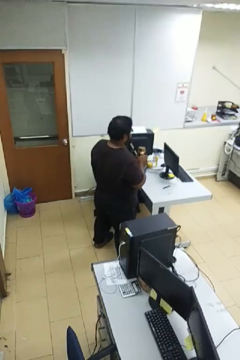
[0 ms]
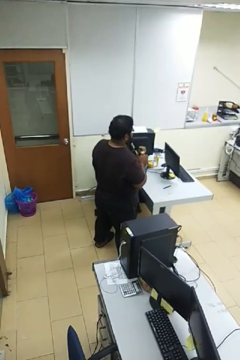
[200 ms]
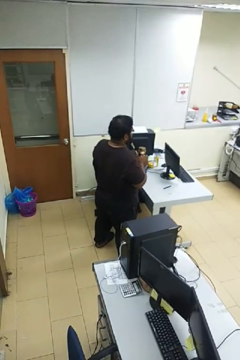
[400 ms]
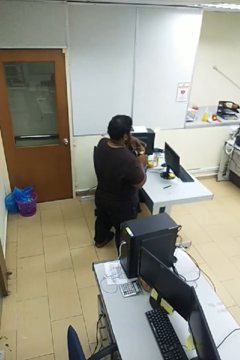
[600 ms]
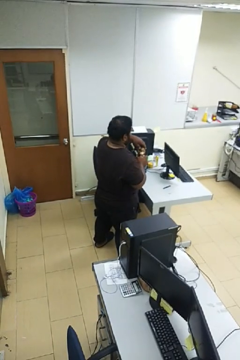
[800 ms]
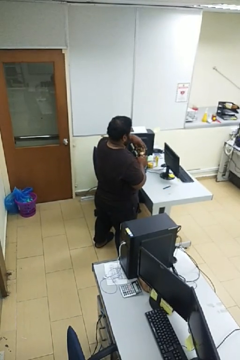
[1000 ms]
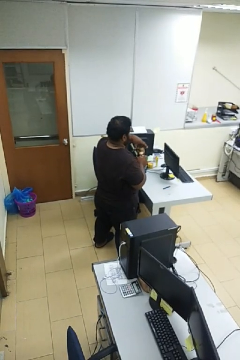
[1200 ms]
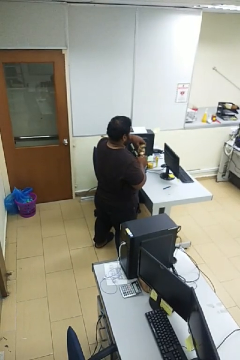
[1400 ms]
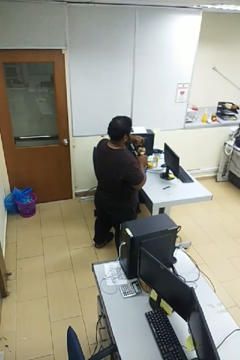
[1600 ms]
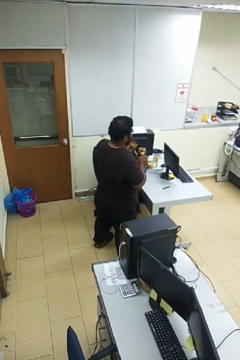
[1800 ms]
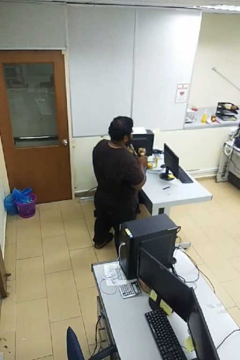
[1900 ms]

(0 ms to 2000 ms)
person opens jar

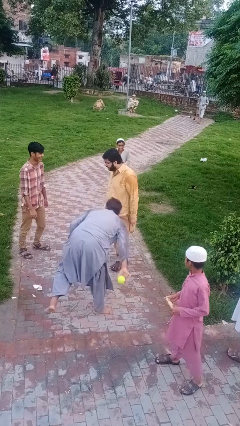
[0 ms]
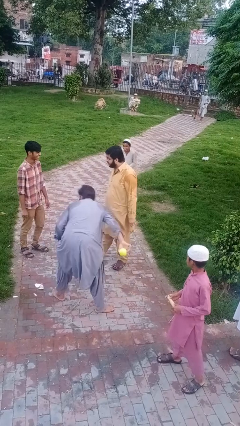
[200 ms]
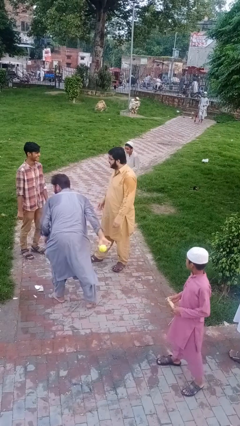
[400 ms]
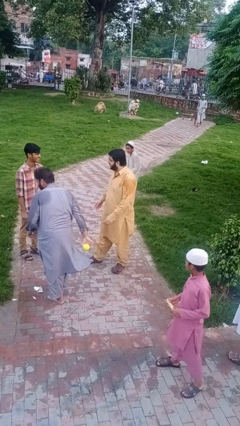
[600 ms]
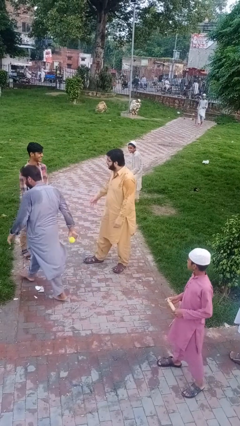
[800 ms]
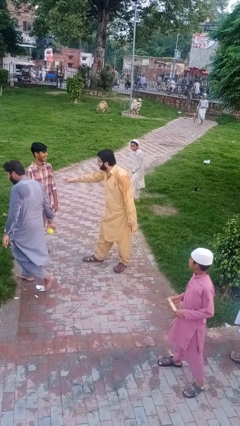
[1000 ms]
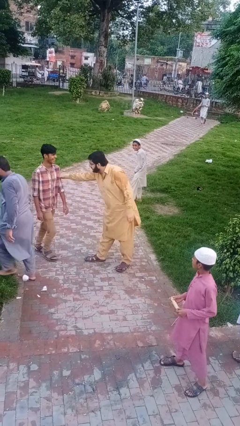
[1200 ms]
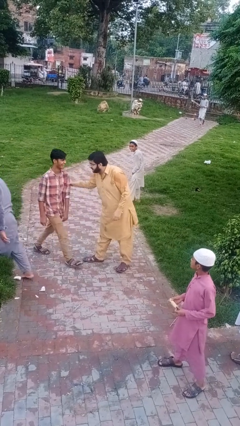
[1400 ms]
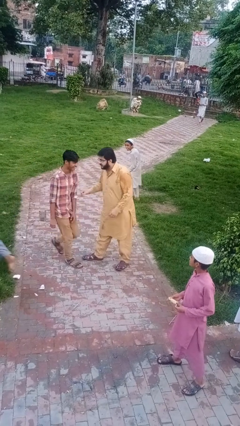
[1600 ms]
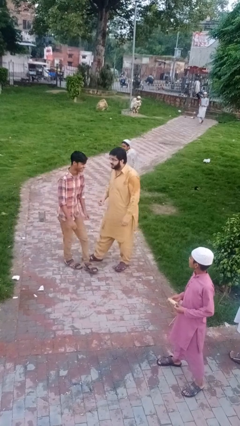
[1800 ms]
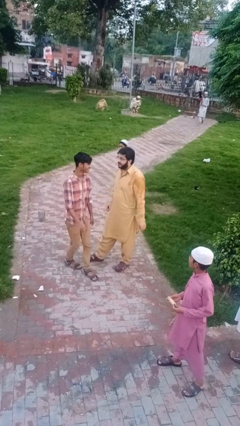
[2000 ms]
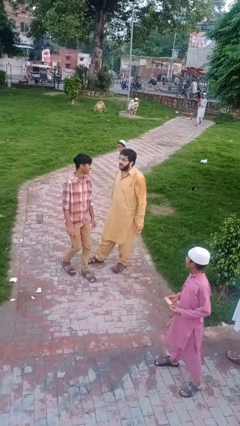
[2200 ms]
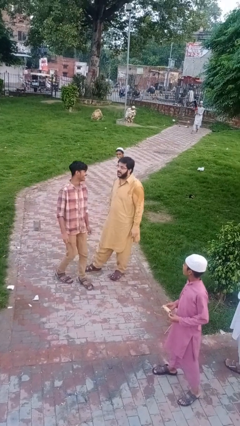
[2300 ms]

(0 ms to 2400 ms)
person grabs person by bicep

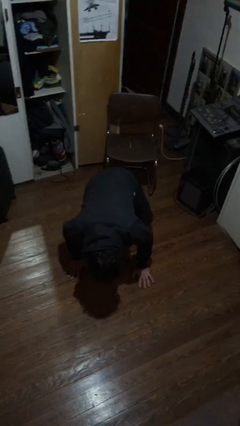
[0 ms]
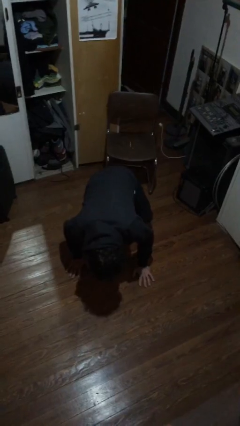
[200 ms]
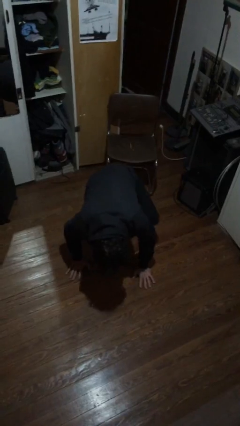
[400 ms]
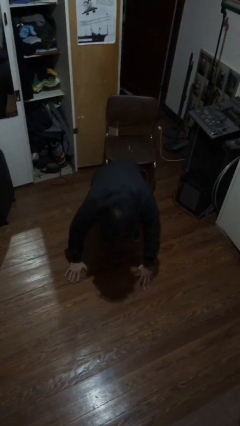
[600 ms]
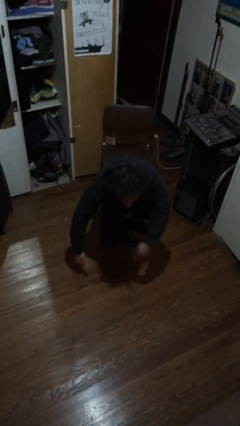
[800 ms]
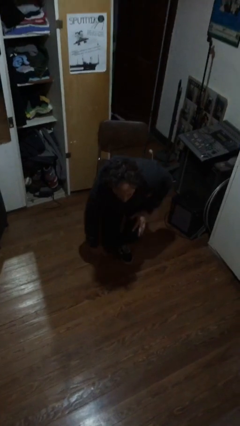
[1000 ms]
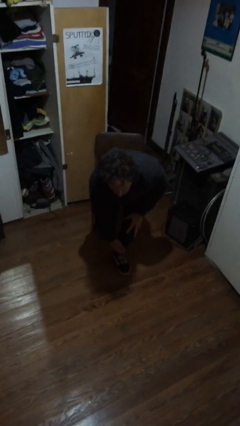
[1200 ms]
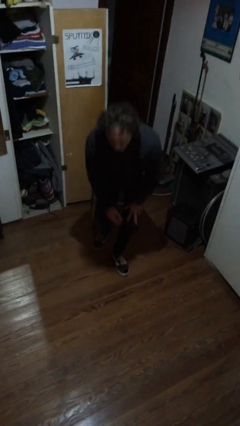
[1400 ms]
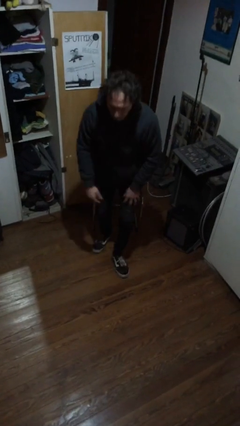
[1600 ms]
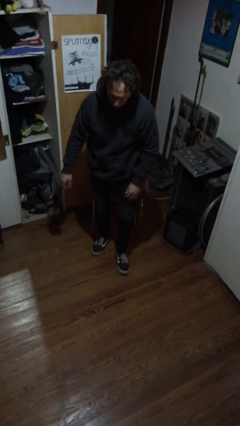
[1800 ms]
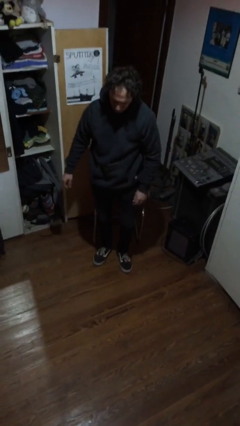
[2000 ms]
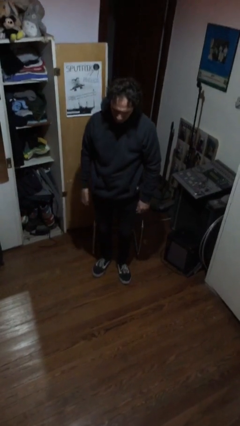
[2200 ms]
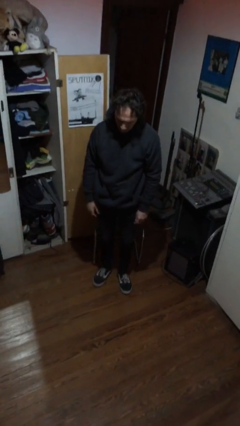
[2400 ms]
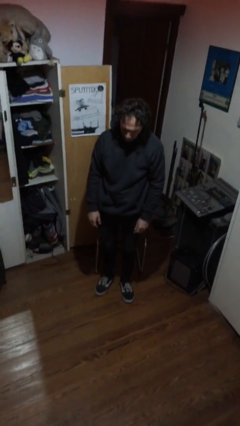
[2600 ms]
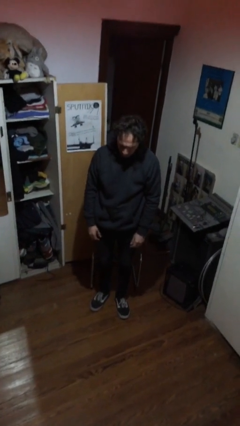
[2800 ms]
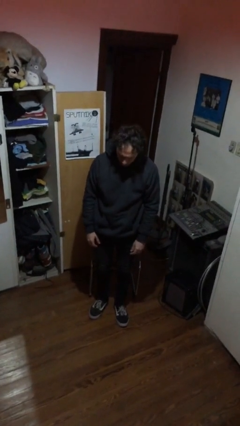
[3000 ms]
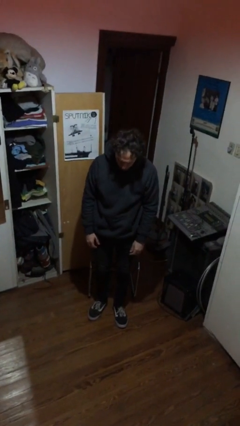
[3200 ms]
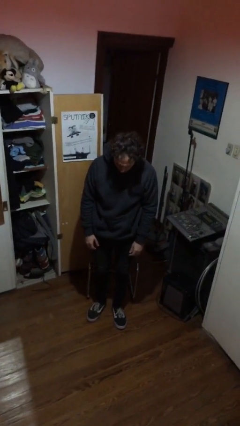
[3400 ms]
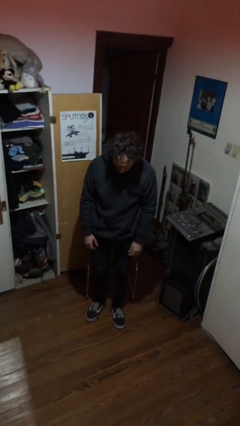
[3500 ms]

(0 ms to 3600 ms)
person stands up from floor

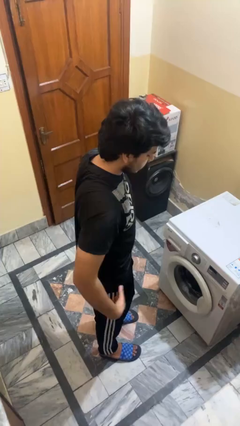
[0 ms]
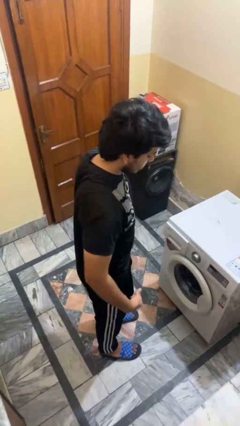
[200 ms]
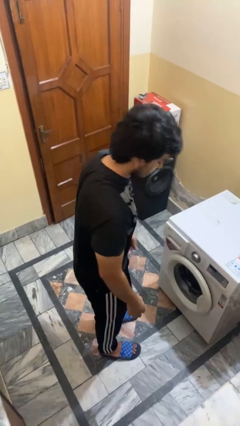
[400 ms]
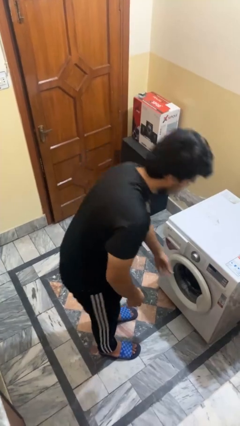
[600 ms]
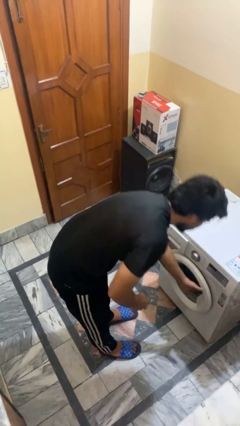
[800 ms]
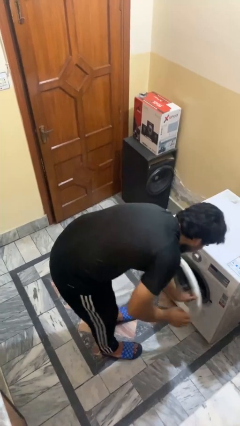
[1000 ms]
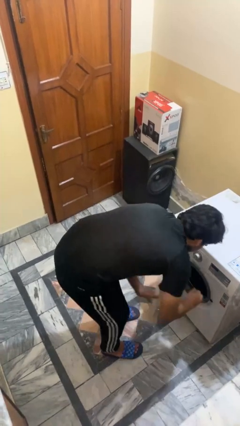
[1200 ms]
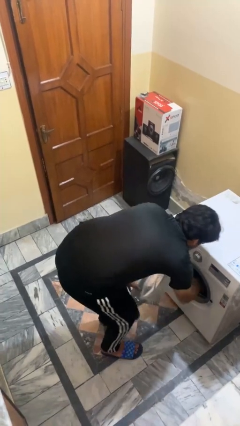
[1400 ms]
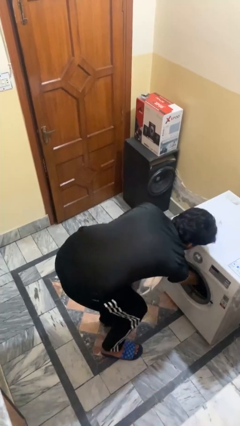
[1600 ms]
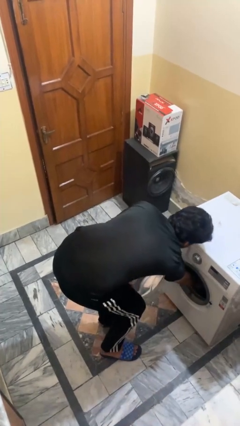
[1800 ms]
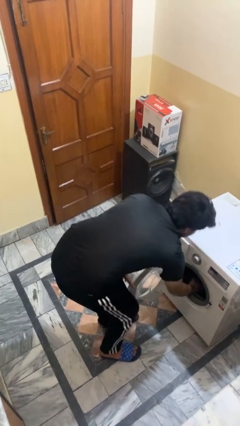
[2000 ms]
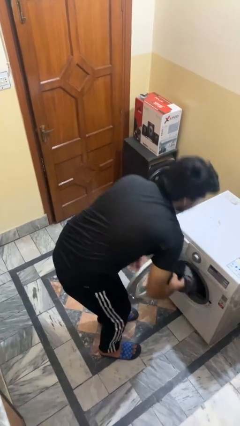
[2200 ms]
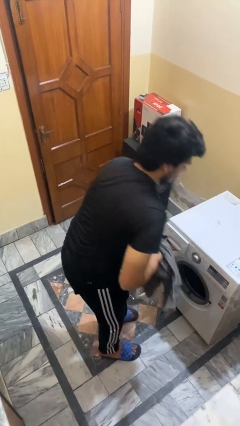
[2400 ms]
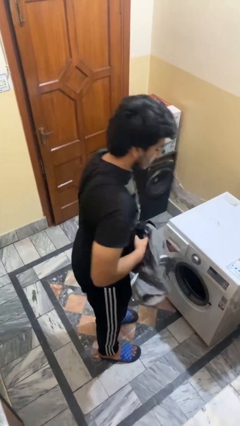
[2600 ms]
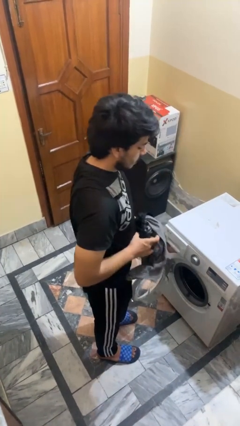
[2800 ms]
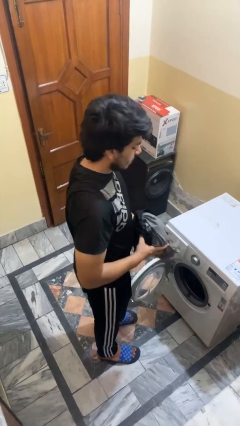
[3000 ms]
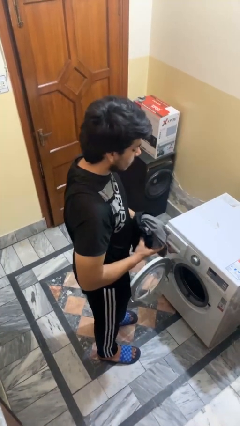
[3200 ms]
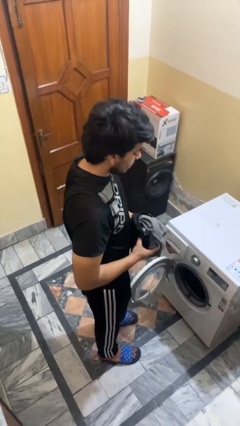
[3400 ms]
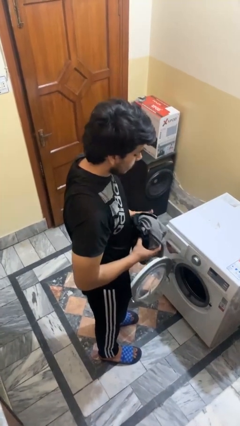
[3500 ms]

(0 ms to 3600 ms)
person unloads clotheswasher

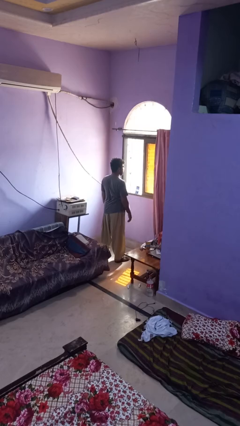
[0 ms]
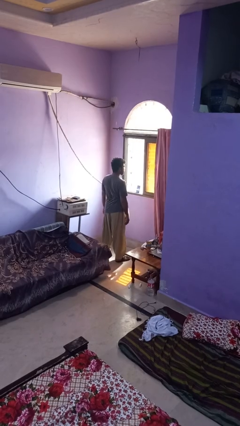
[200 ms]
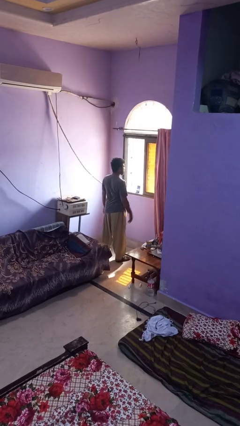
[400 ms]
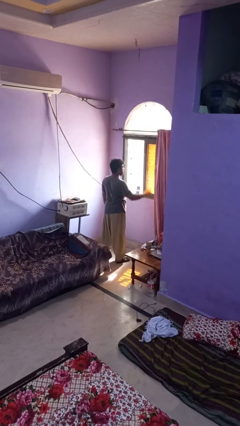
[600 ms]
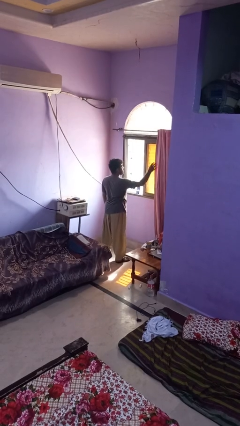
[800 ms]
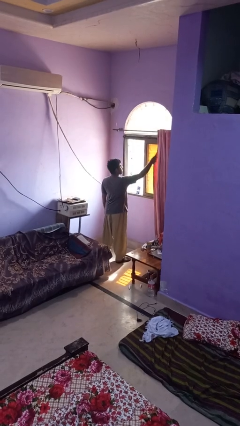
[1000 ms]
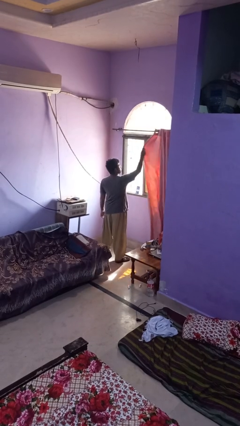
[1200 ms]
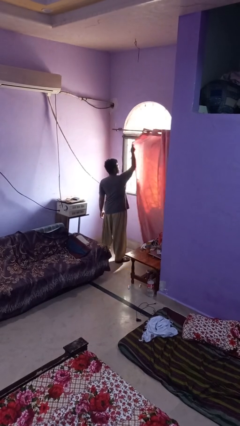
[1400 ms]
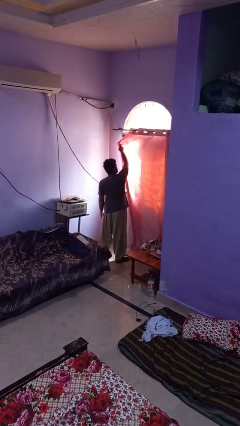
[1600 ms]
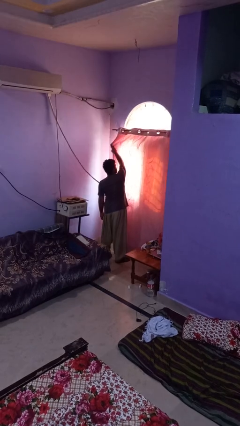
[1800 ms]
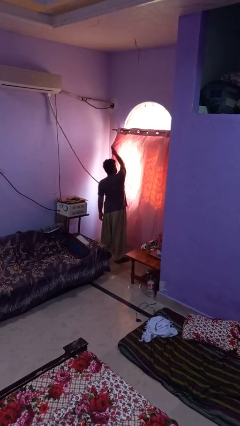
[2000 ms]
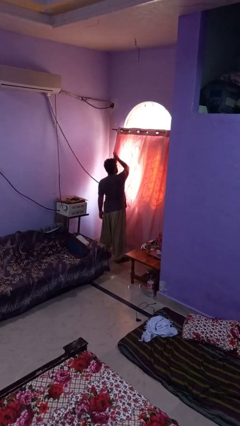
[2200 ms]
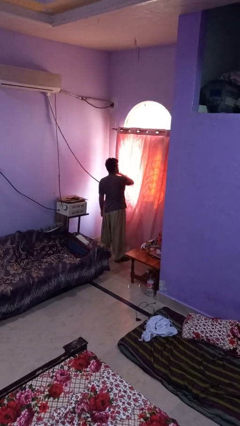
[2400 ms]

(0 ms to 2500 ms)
person closes curtains

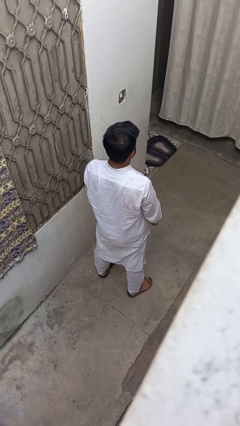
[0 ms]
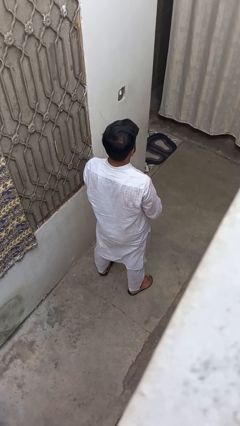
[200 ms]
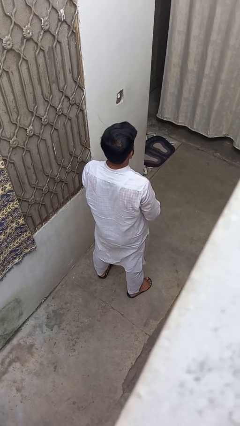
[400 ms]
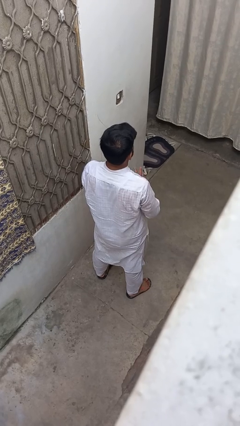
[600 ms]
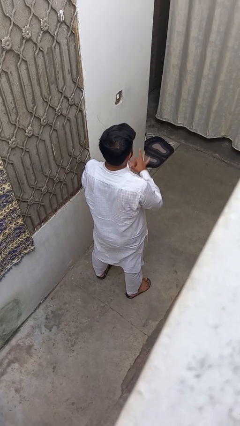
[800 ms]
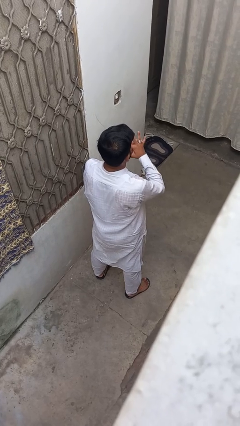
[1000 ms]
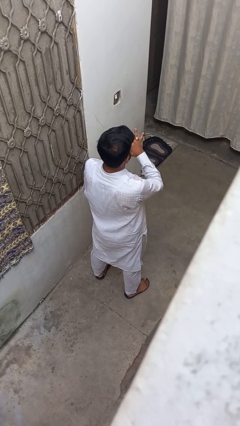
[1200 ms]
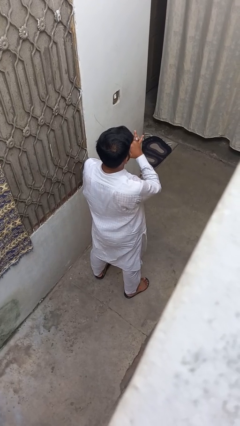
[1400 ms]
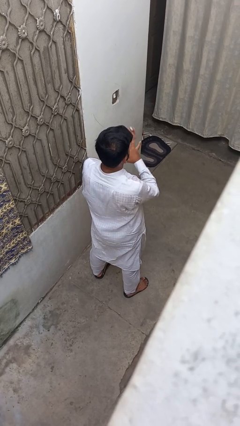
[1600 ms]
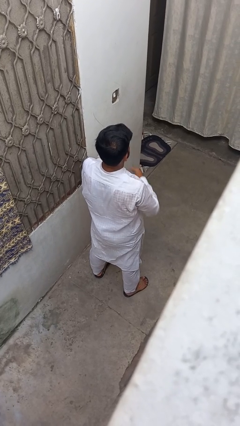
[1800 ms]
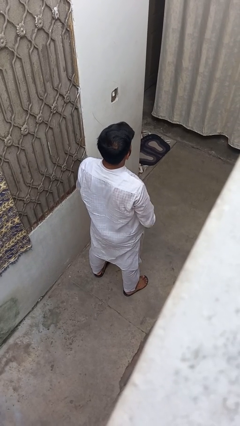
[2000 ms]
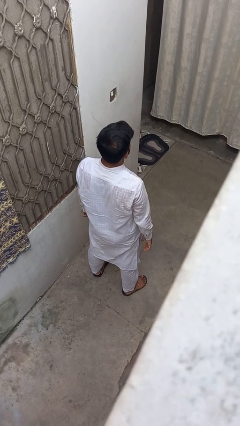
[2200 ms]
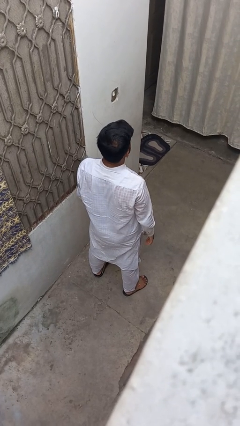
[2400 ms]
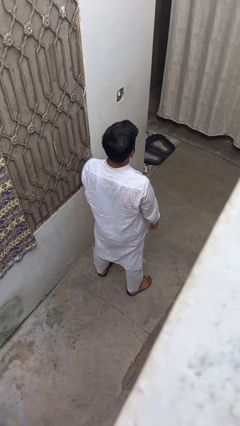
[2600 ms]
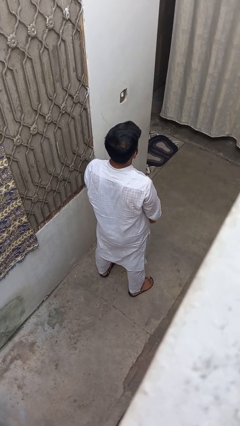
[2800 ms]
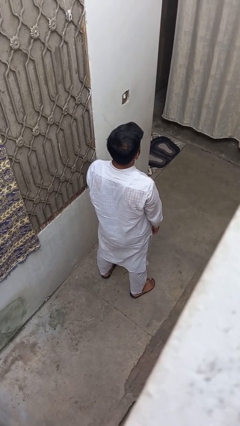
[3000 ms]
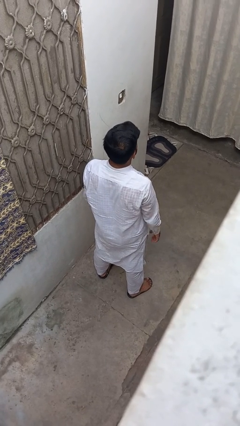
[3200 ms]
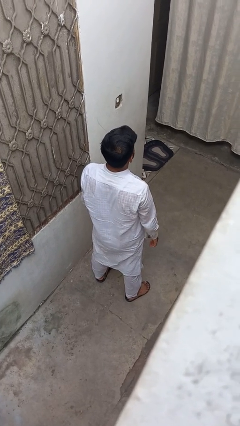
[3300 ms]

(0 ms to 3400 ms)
person takes off ring

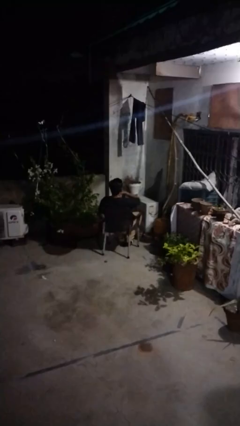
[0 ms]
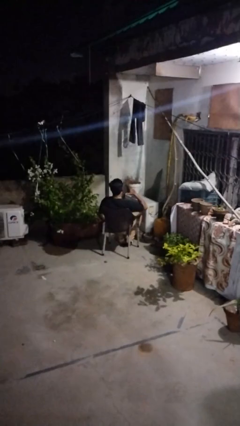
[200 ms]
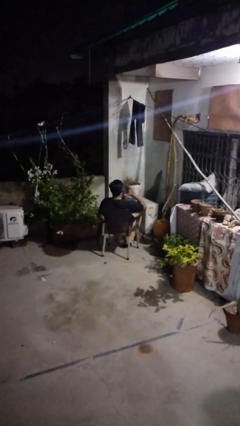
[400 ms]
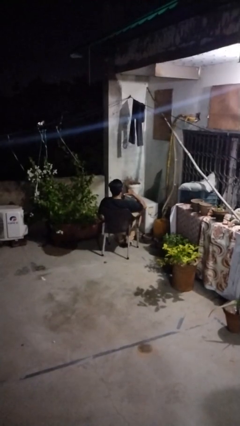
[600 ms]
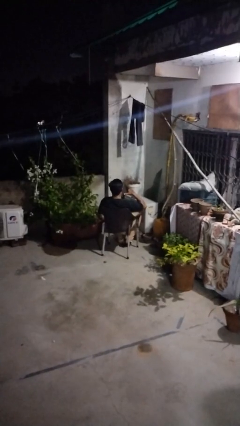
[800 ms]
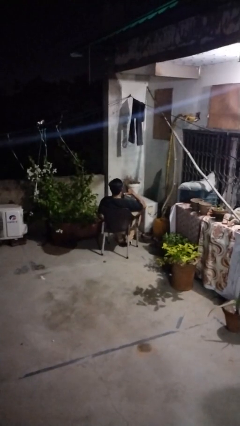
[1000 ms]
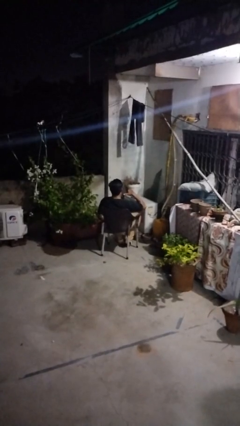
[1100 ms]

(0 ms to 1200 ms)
person gestures cut
